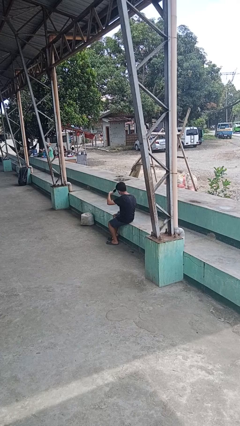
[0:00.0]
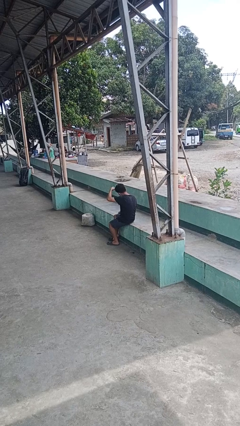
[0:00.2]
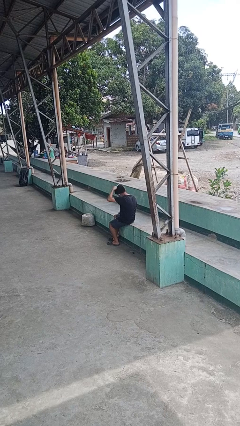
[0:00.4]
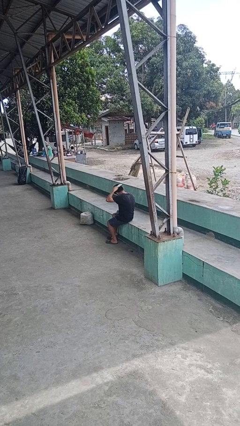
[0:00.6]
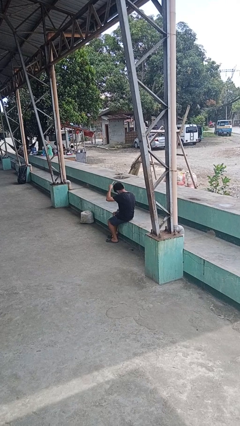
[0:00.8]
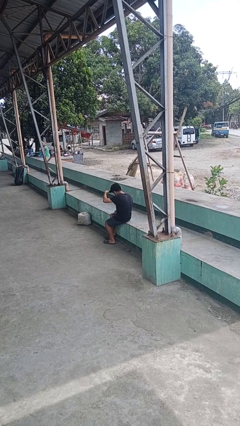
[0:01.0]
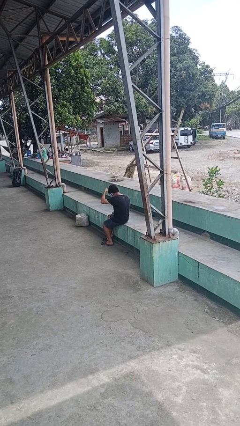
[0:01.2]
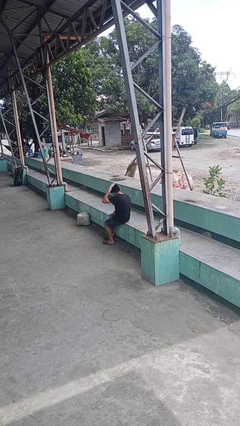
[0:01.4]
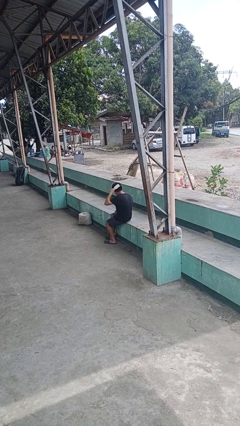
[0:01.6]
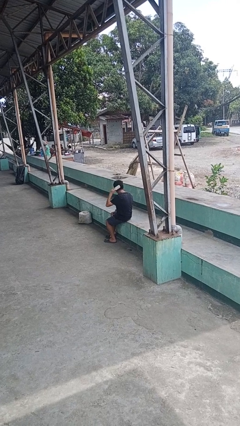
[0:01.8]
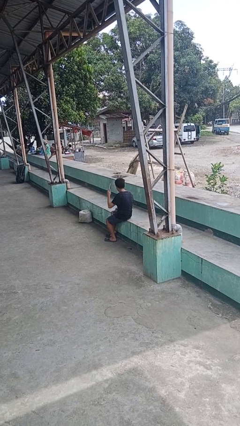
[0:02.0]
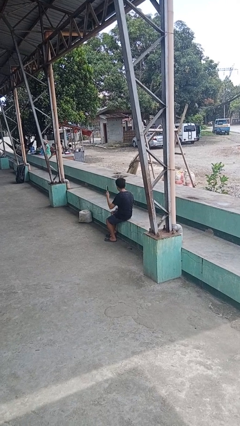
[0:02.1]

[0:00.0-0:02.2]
person brushes hair

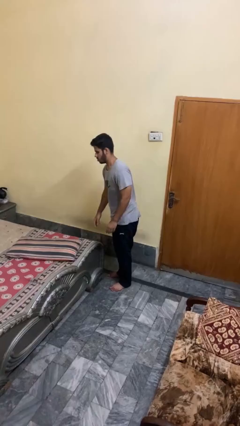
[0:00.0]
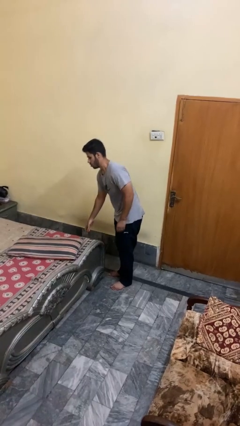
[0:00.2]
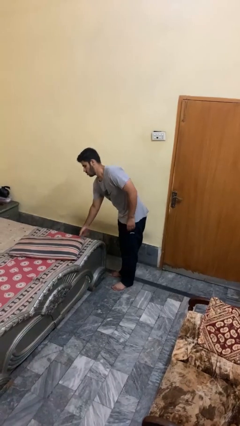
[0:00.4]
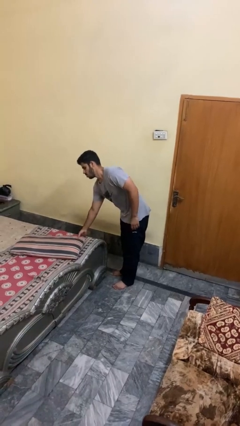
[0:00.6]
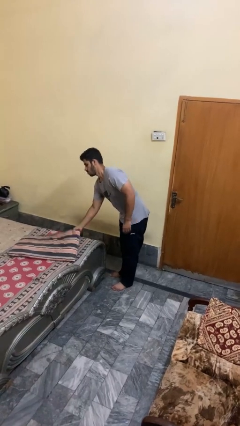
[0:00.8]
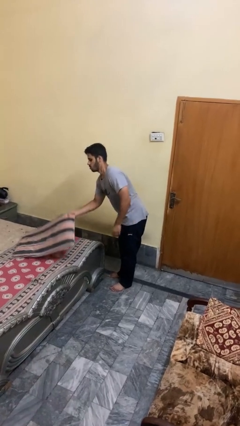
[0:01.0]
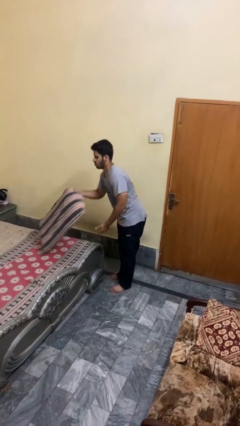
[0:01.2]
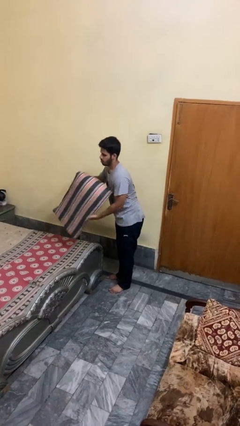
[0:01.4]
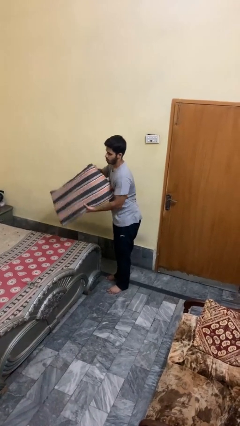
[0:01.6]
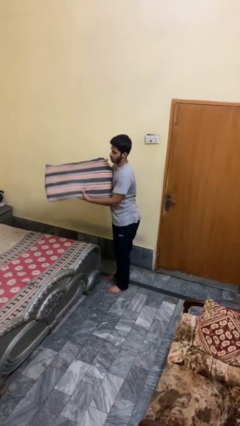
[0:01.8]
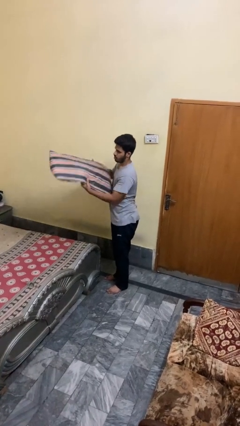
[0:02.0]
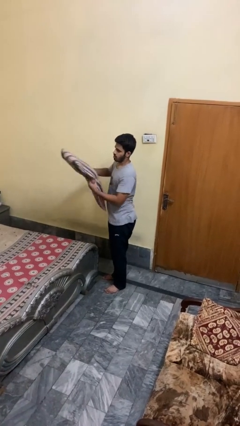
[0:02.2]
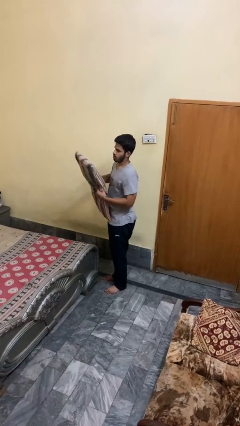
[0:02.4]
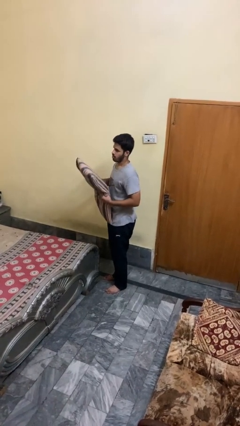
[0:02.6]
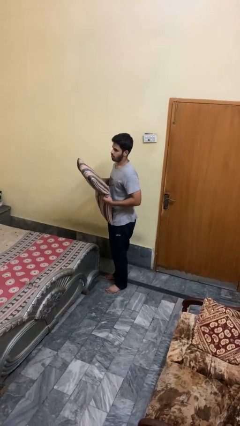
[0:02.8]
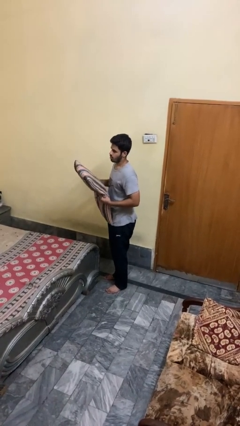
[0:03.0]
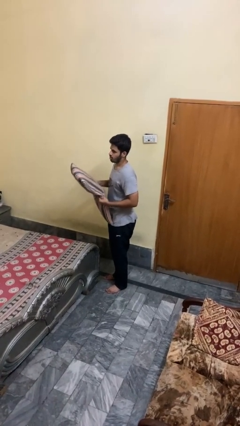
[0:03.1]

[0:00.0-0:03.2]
person picks up object from bed

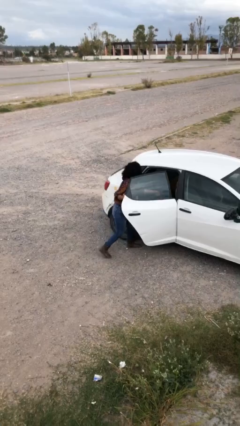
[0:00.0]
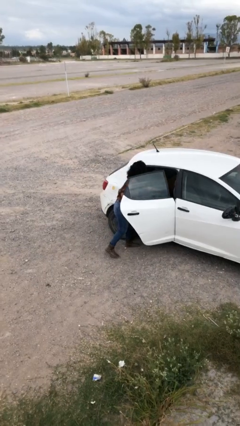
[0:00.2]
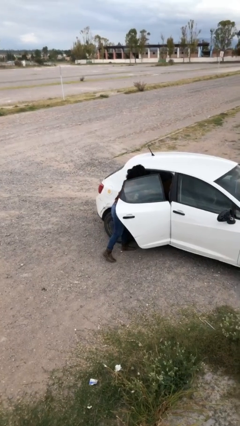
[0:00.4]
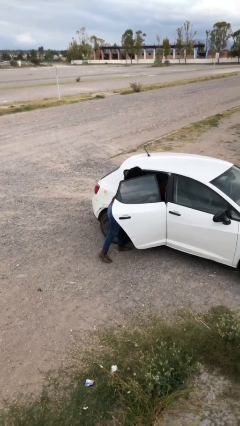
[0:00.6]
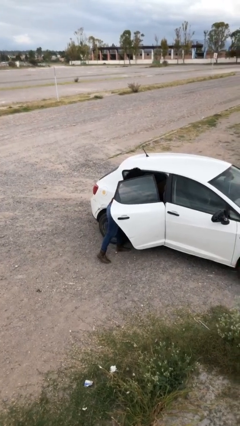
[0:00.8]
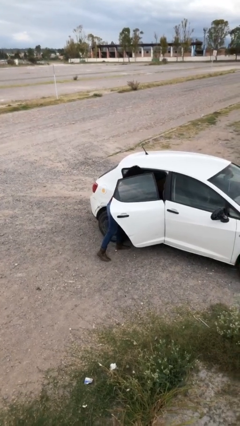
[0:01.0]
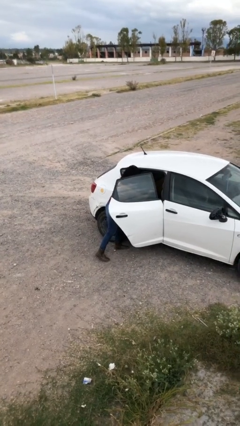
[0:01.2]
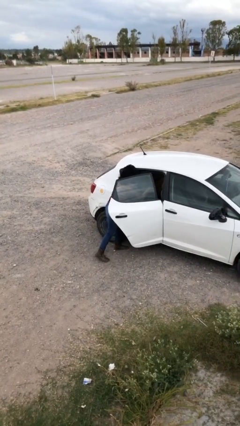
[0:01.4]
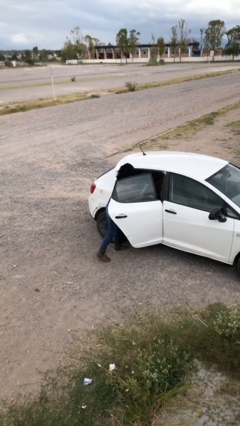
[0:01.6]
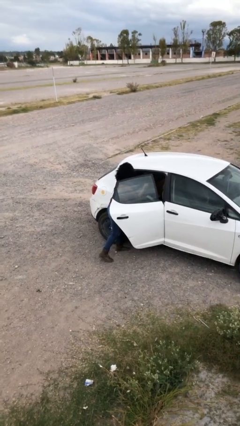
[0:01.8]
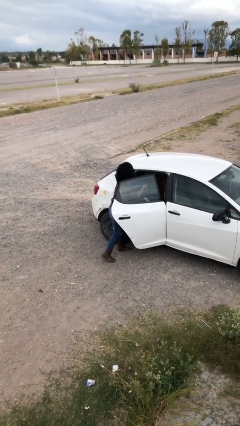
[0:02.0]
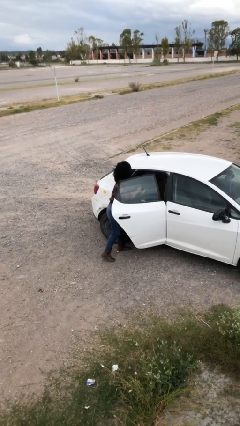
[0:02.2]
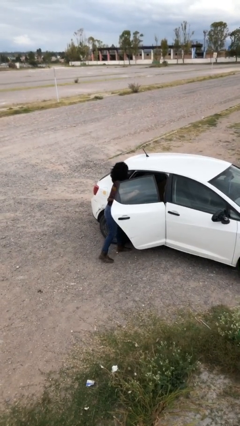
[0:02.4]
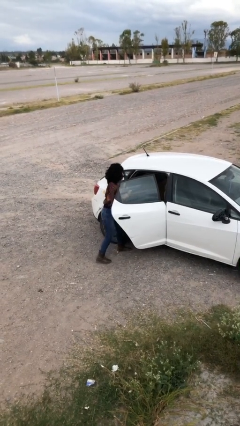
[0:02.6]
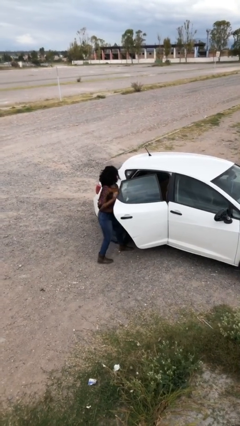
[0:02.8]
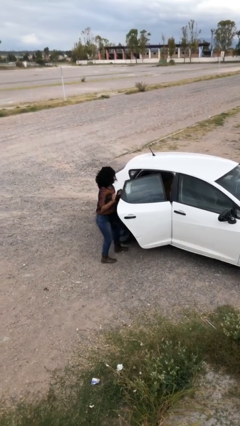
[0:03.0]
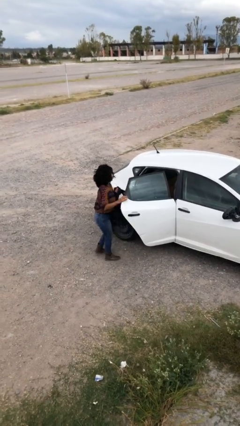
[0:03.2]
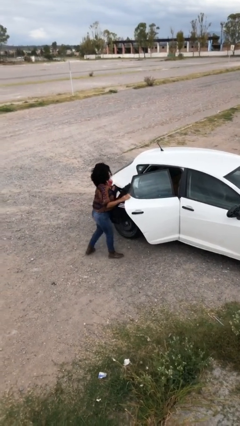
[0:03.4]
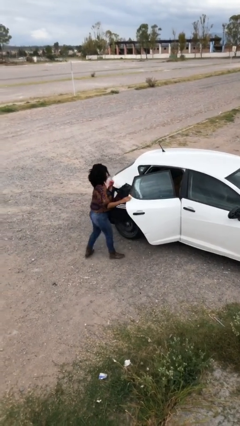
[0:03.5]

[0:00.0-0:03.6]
person unloads car

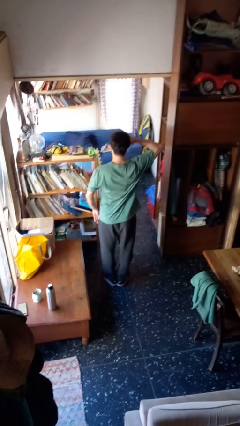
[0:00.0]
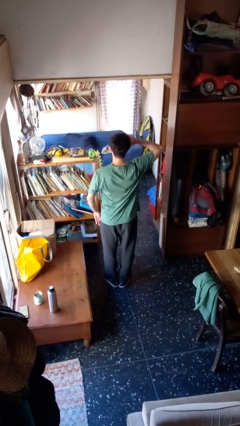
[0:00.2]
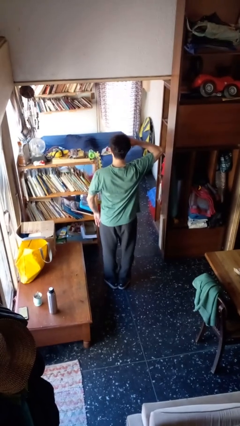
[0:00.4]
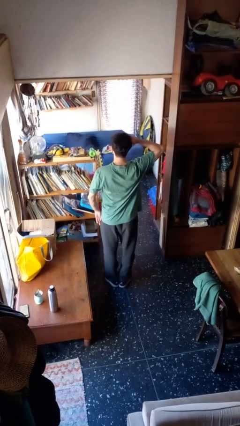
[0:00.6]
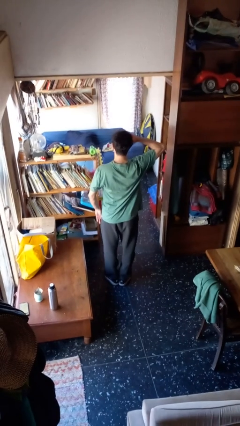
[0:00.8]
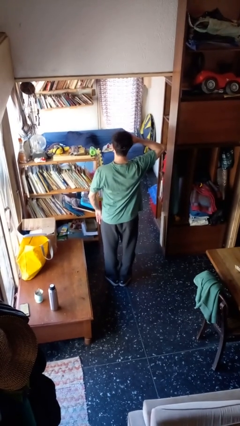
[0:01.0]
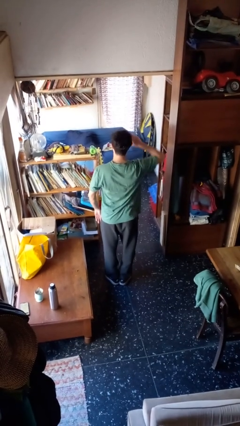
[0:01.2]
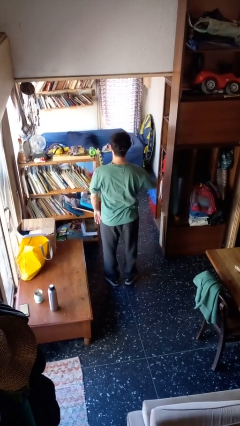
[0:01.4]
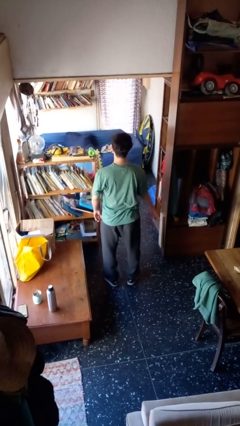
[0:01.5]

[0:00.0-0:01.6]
person salutes

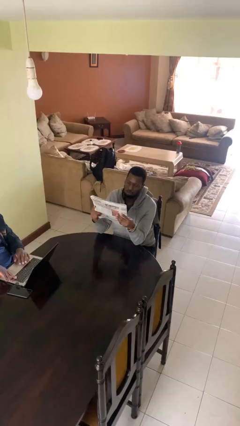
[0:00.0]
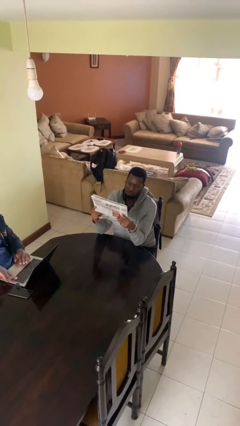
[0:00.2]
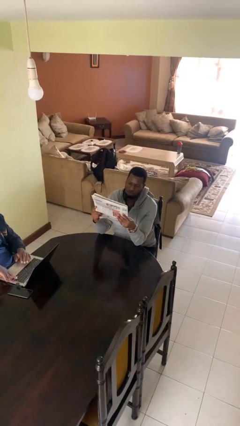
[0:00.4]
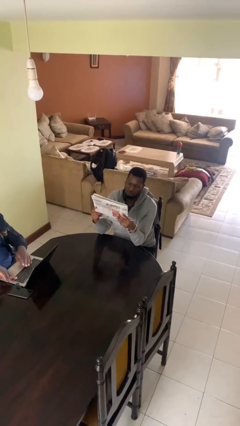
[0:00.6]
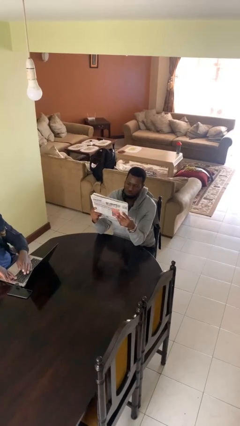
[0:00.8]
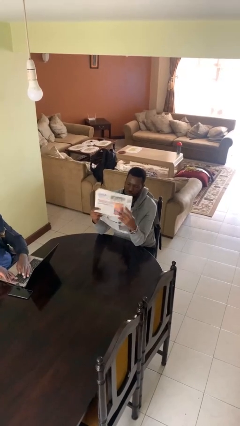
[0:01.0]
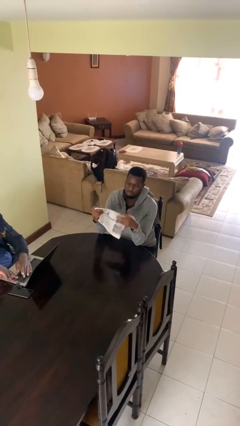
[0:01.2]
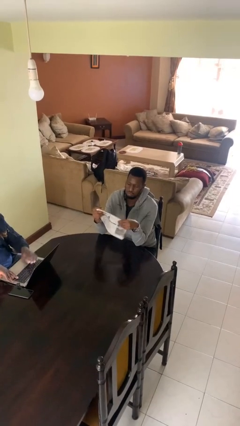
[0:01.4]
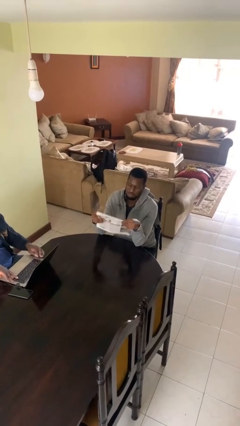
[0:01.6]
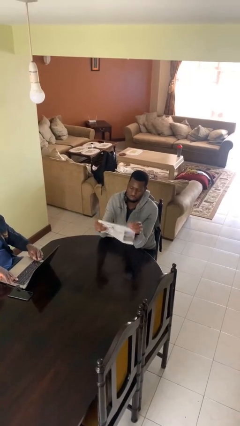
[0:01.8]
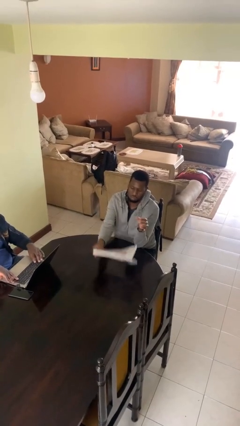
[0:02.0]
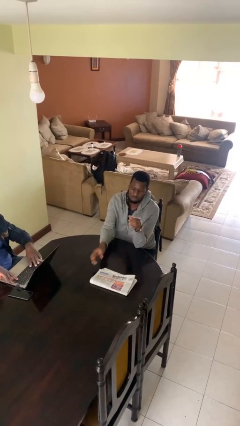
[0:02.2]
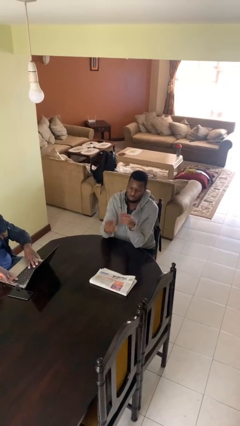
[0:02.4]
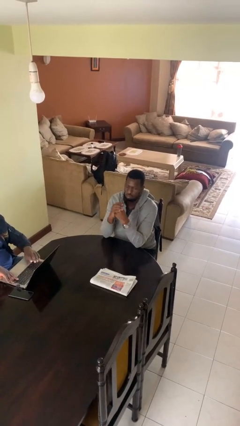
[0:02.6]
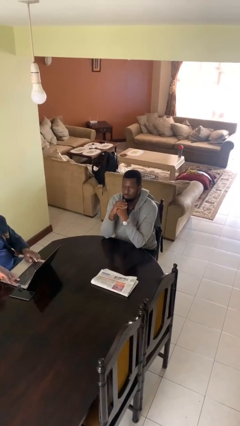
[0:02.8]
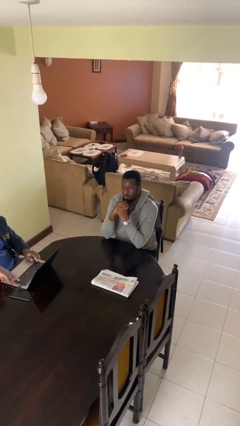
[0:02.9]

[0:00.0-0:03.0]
person puts down object on table

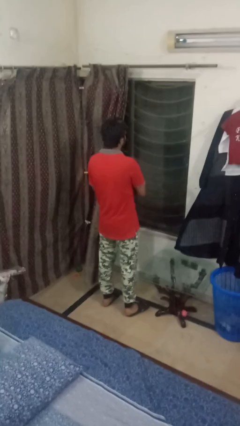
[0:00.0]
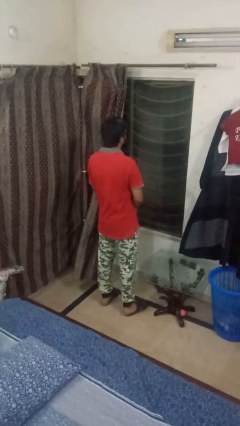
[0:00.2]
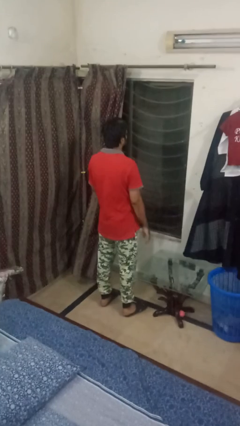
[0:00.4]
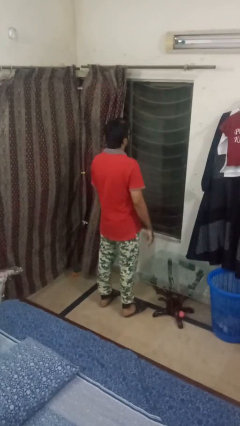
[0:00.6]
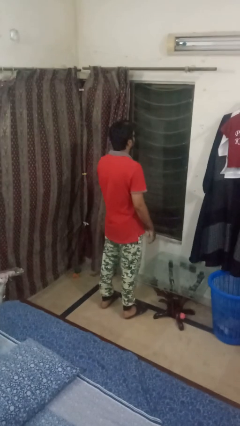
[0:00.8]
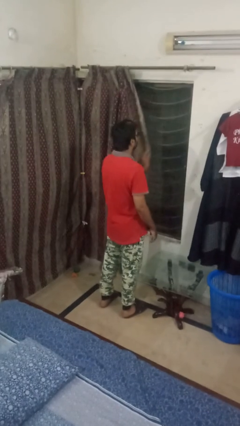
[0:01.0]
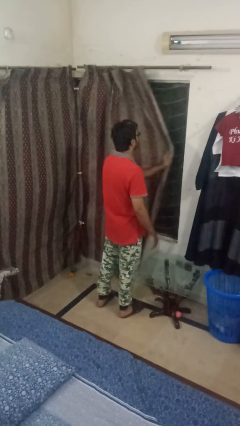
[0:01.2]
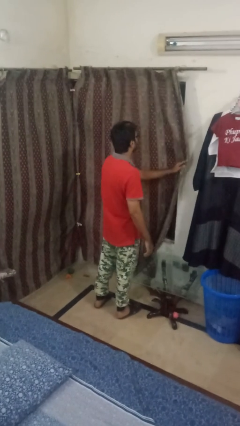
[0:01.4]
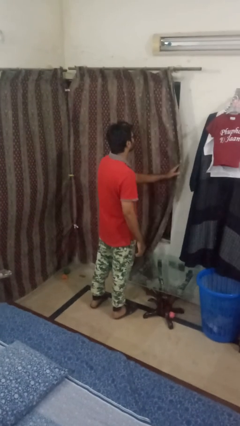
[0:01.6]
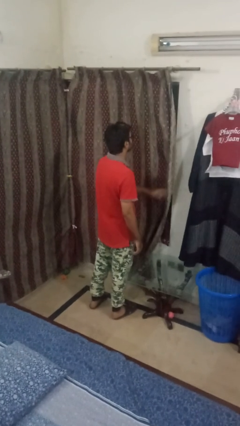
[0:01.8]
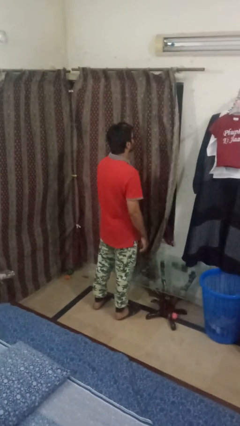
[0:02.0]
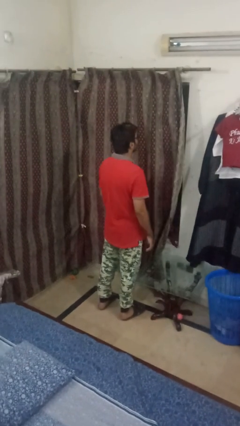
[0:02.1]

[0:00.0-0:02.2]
person closes curtains

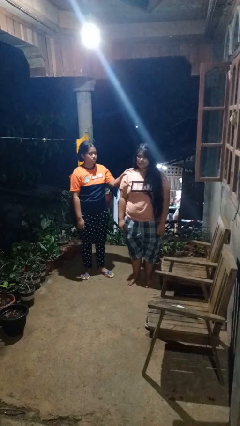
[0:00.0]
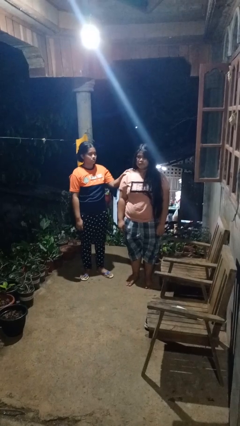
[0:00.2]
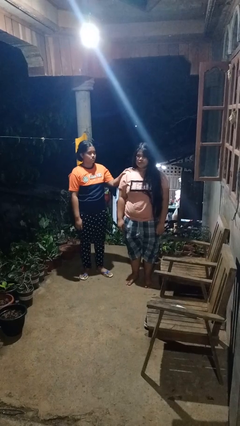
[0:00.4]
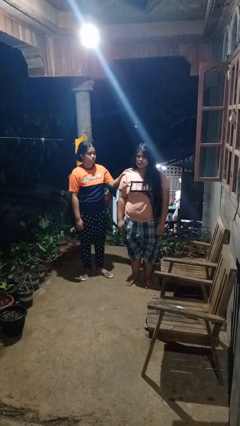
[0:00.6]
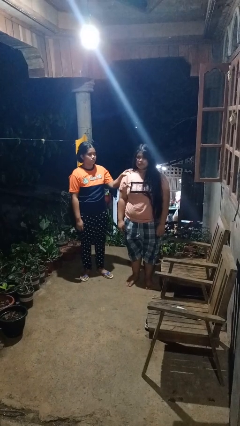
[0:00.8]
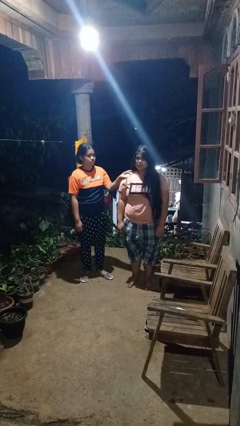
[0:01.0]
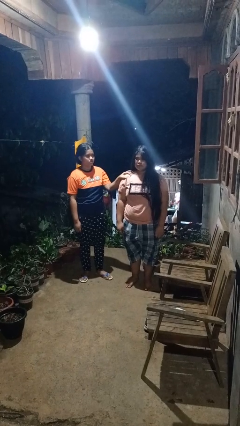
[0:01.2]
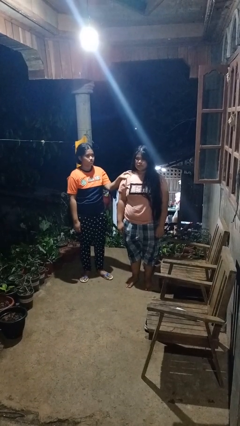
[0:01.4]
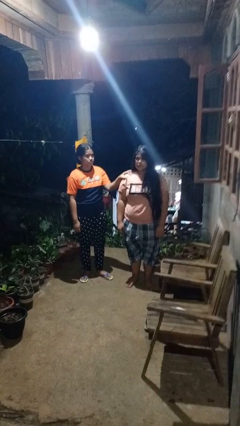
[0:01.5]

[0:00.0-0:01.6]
person grabs person by shoulder
